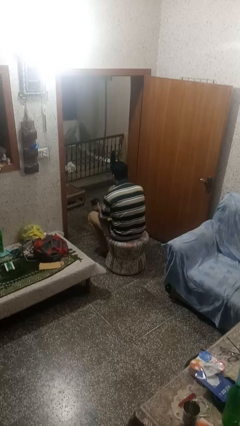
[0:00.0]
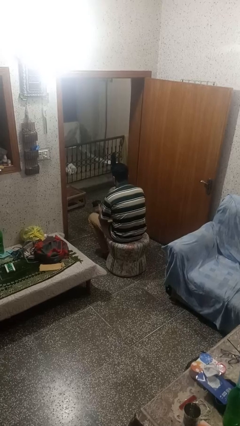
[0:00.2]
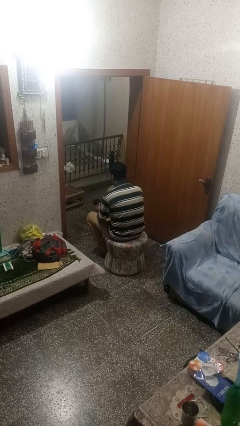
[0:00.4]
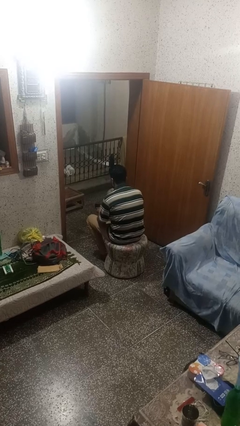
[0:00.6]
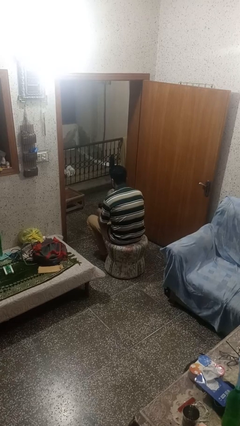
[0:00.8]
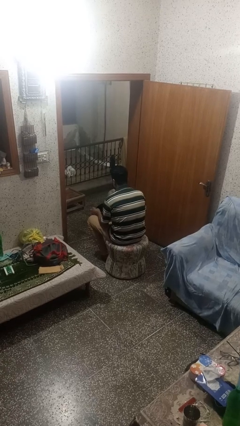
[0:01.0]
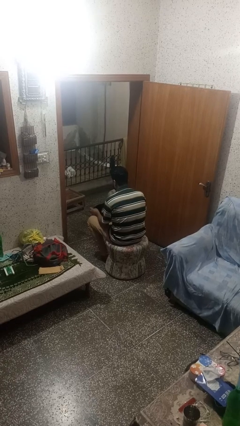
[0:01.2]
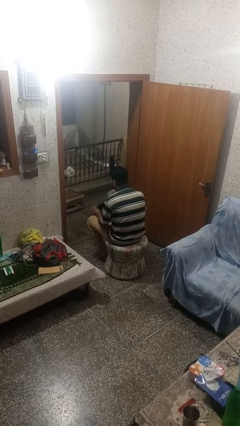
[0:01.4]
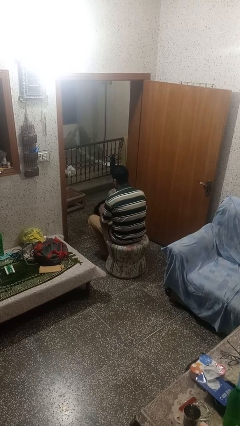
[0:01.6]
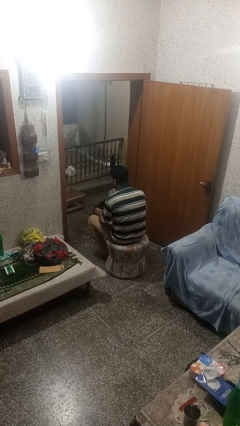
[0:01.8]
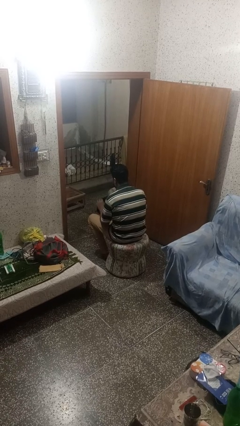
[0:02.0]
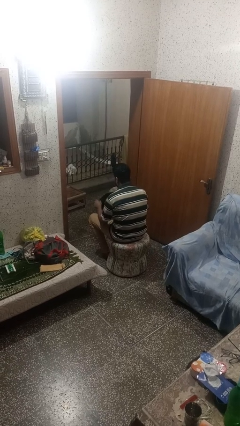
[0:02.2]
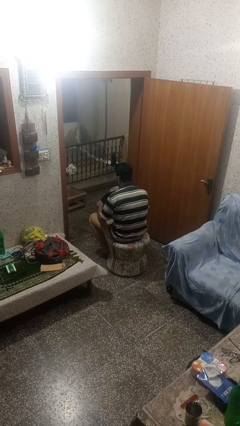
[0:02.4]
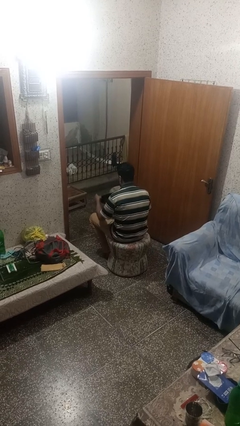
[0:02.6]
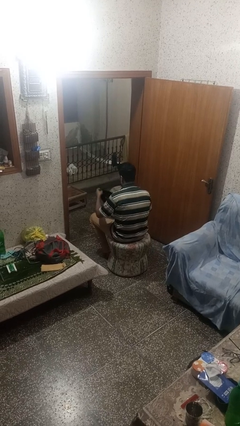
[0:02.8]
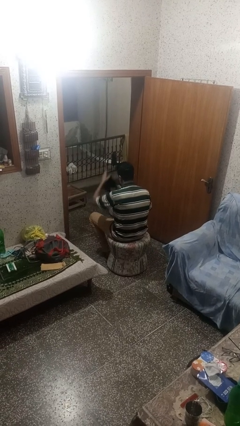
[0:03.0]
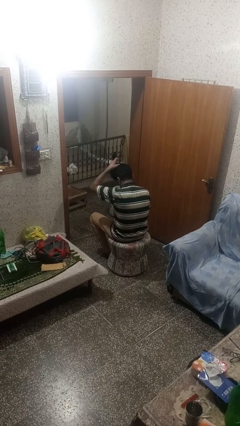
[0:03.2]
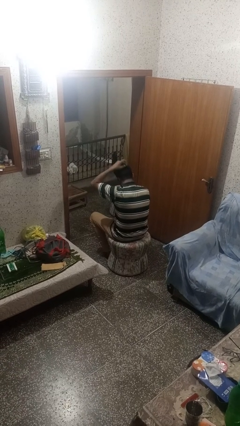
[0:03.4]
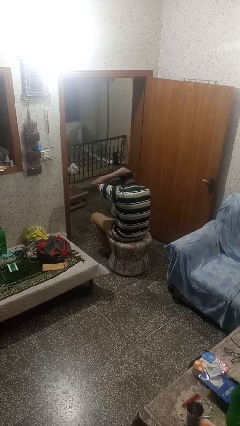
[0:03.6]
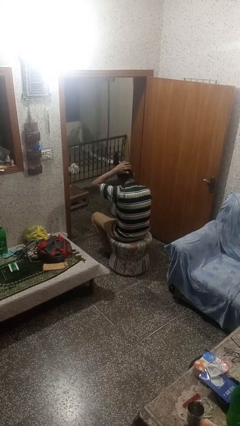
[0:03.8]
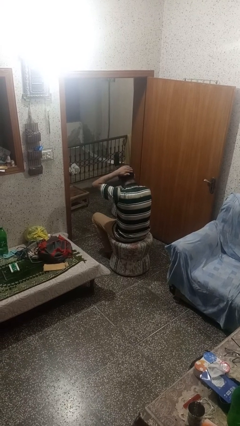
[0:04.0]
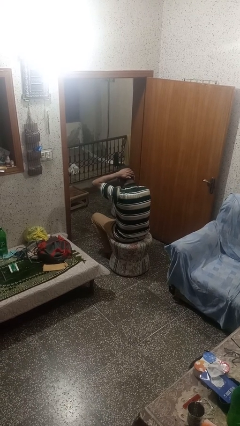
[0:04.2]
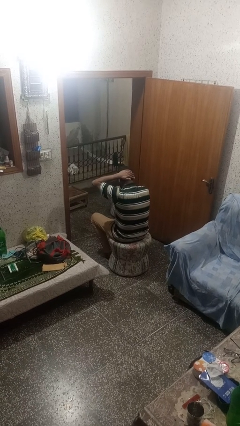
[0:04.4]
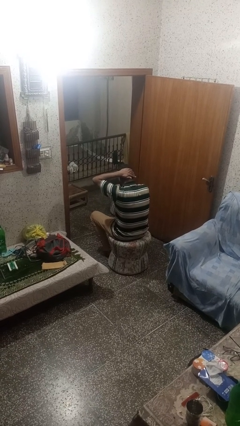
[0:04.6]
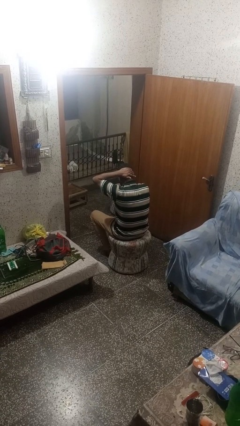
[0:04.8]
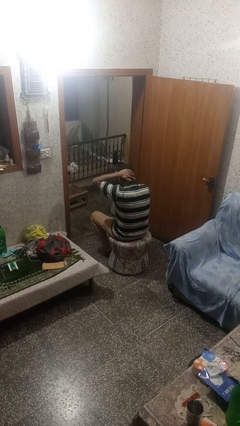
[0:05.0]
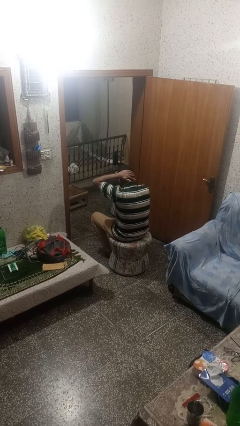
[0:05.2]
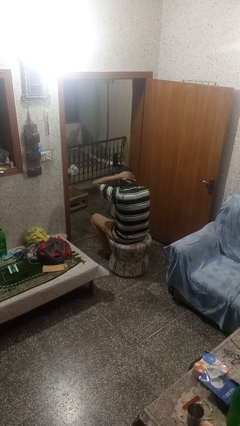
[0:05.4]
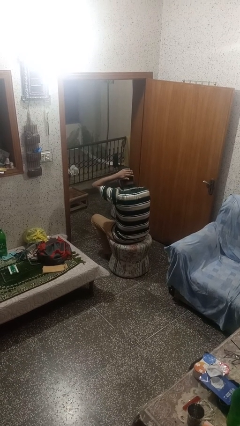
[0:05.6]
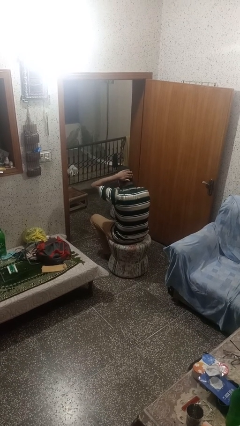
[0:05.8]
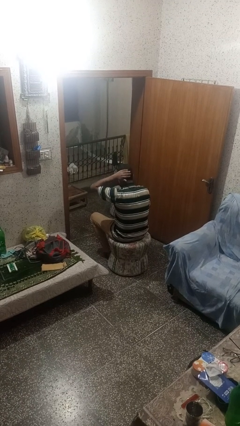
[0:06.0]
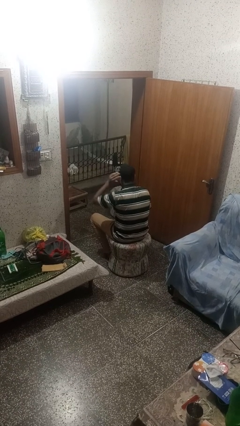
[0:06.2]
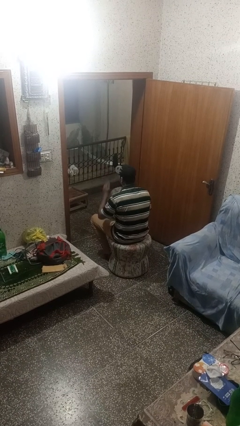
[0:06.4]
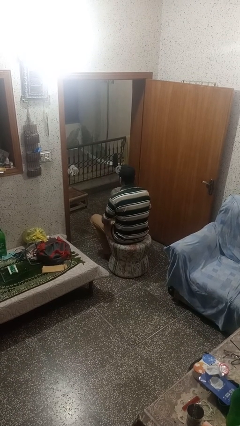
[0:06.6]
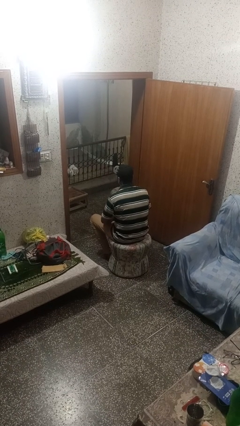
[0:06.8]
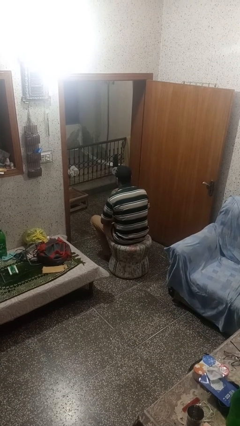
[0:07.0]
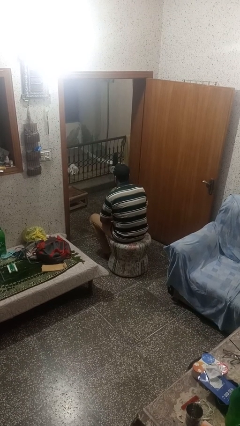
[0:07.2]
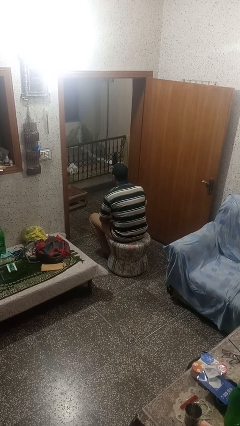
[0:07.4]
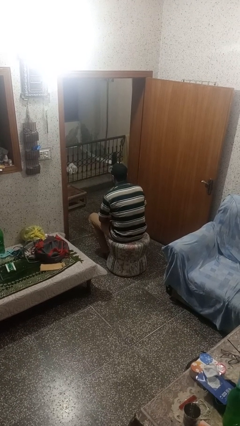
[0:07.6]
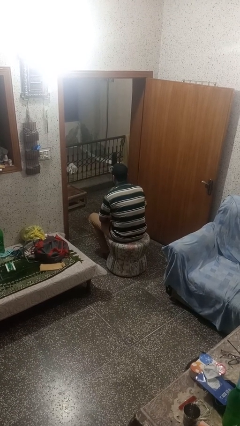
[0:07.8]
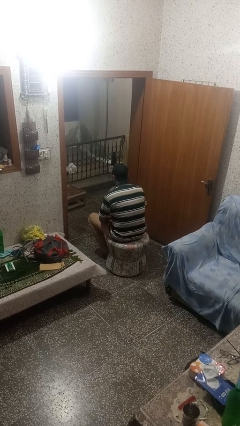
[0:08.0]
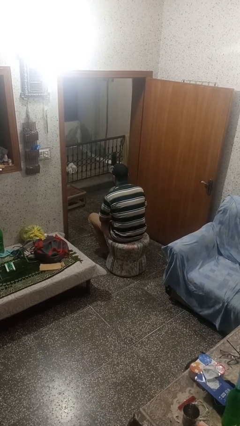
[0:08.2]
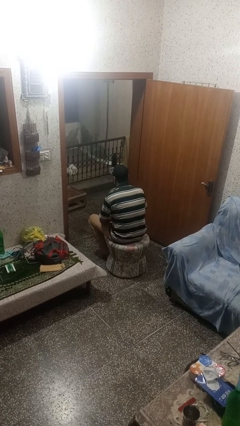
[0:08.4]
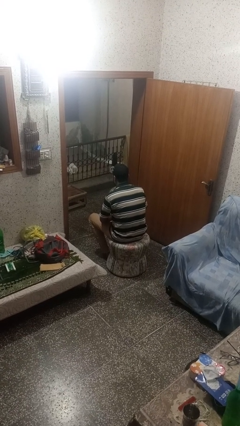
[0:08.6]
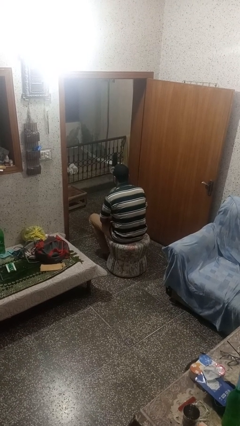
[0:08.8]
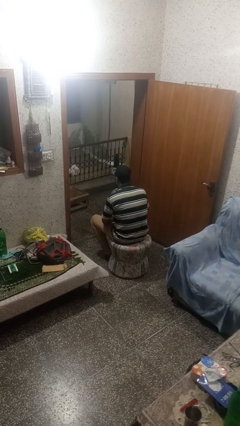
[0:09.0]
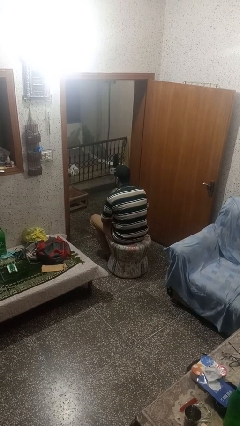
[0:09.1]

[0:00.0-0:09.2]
person puts on hat

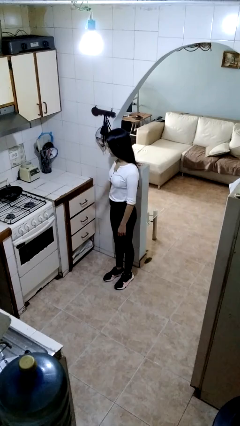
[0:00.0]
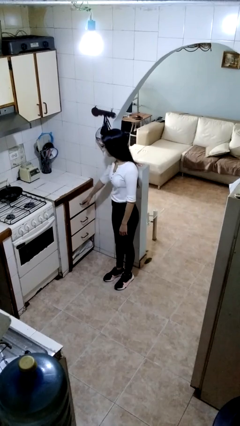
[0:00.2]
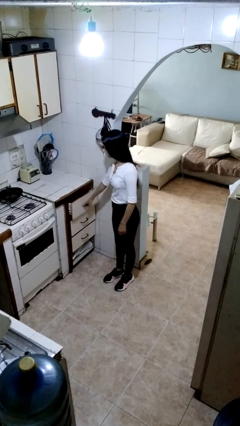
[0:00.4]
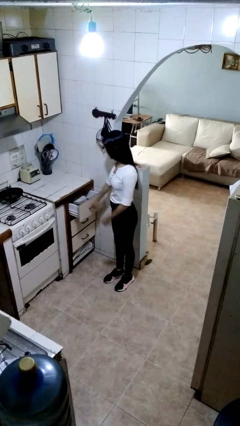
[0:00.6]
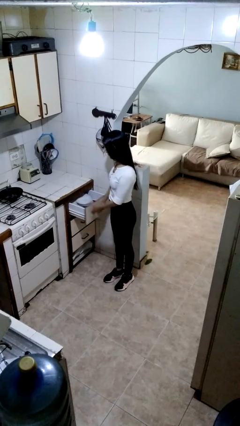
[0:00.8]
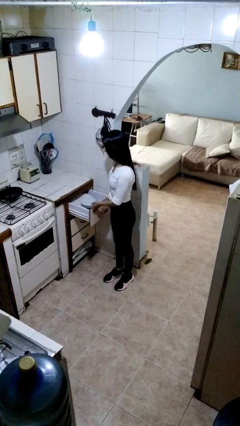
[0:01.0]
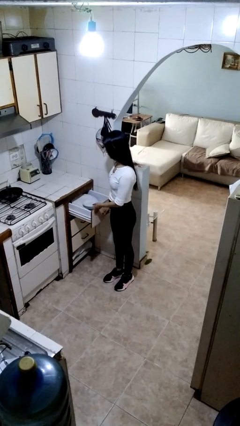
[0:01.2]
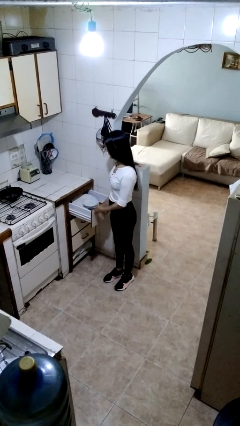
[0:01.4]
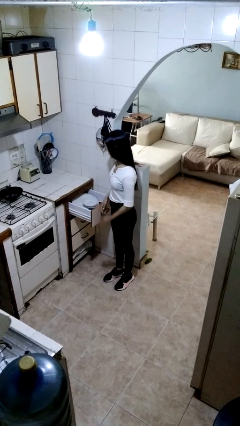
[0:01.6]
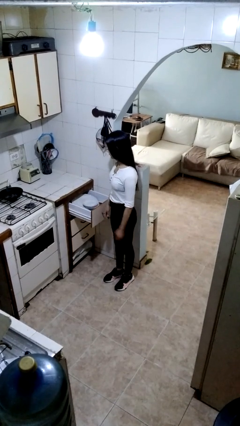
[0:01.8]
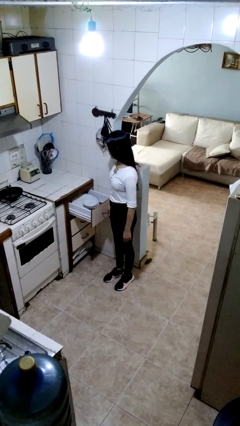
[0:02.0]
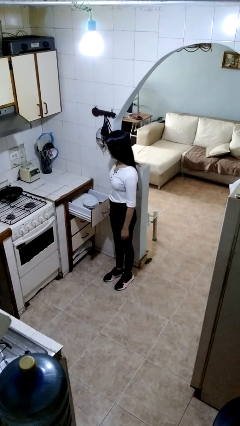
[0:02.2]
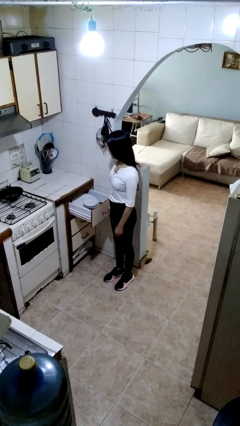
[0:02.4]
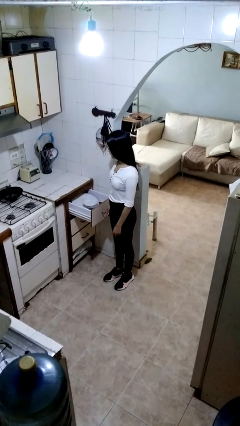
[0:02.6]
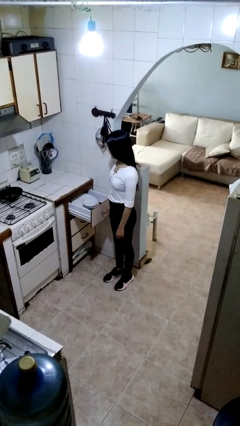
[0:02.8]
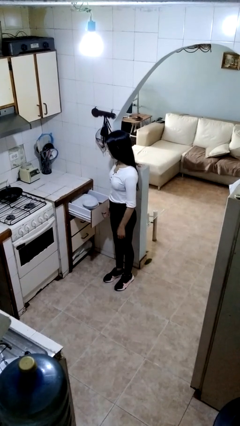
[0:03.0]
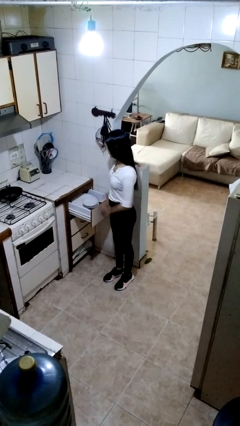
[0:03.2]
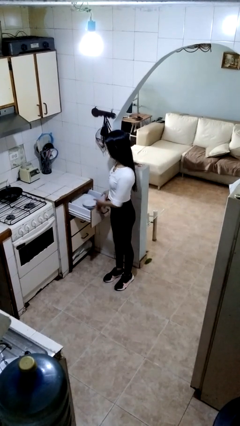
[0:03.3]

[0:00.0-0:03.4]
person opens kitchen drawer

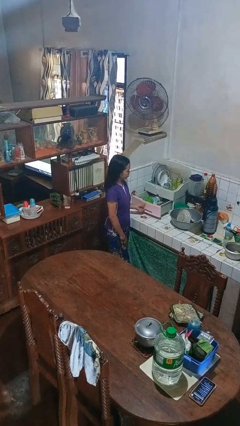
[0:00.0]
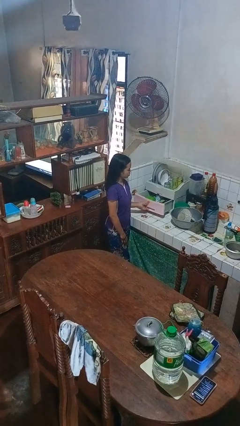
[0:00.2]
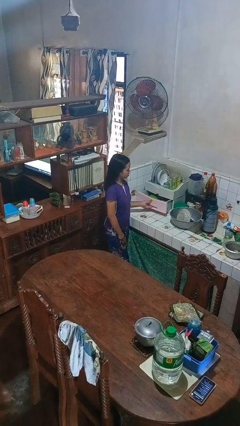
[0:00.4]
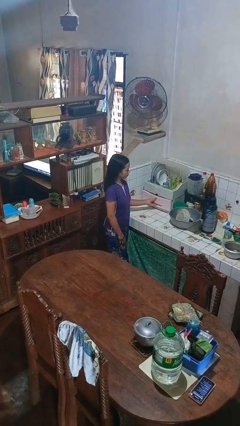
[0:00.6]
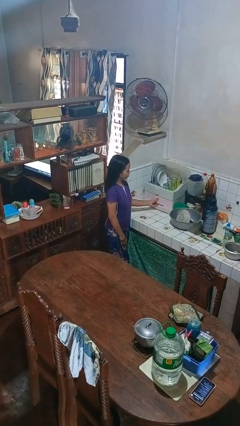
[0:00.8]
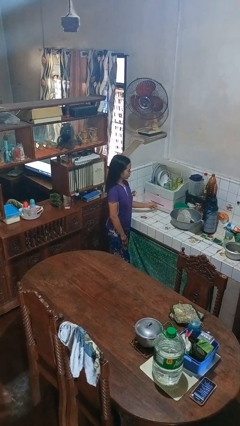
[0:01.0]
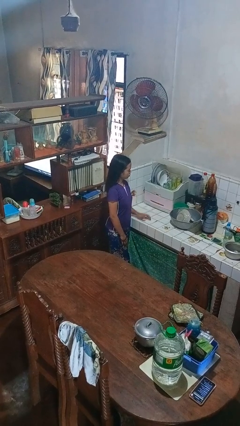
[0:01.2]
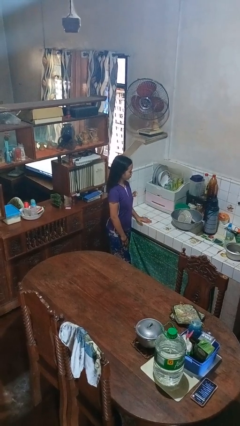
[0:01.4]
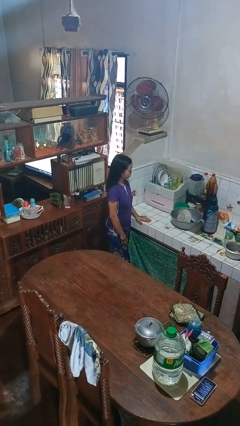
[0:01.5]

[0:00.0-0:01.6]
person closes kitchen drawer

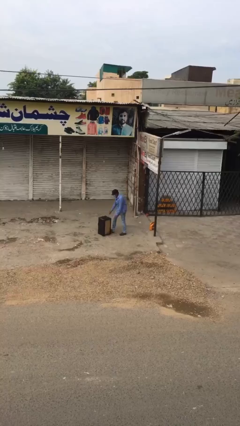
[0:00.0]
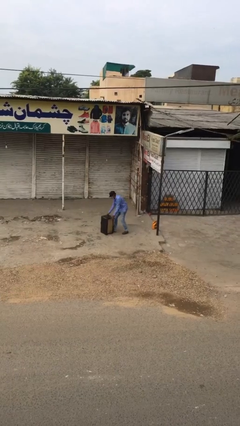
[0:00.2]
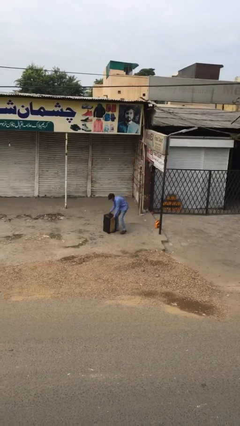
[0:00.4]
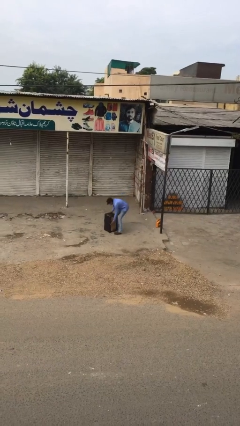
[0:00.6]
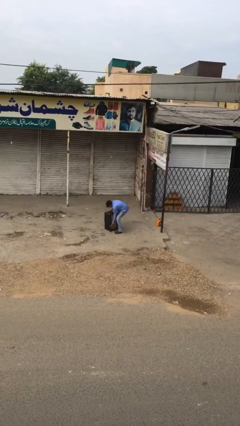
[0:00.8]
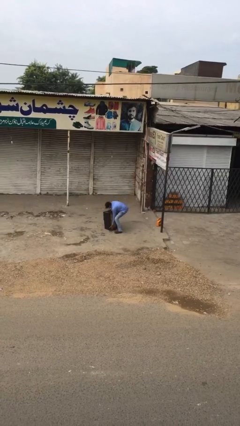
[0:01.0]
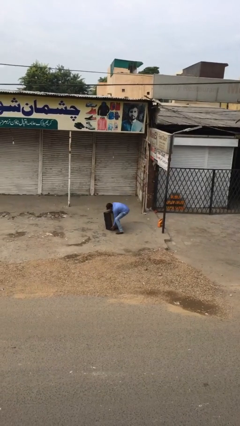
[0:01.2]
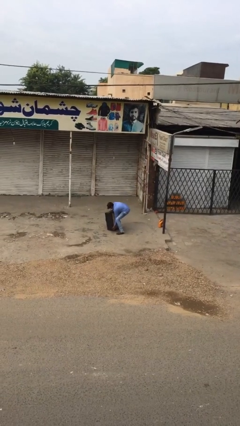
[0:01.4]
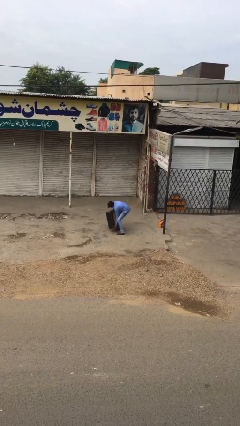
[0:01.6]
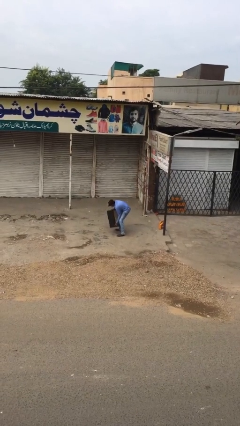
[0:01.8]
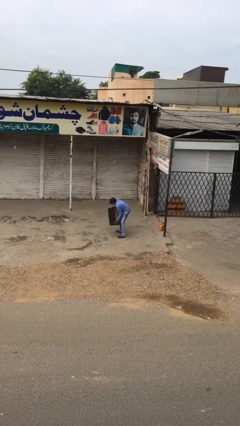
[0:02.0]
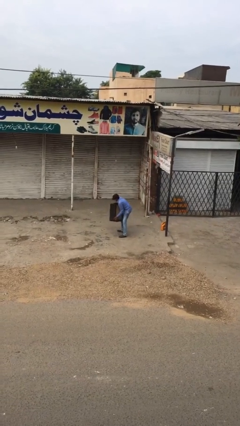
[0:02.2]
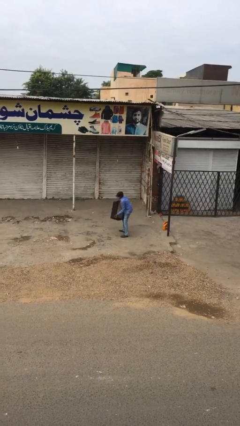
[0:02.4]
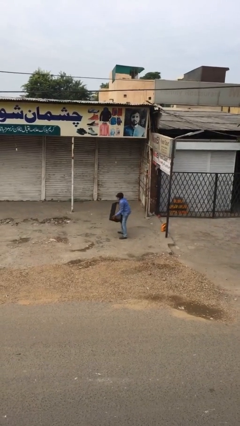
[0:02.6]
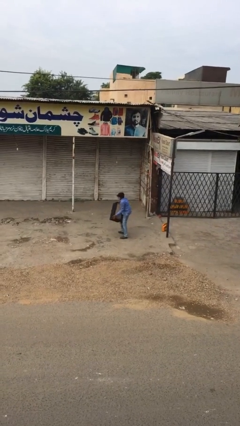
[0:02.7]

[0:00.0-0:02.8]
person picks up object from floor

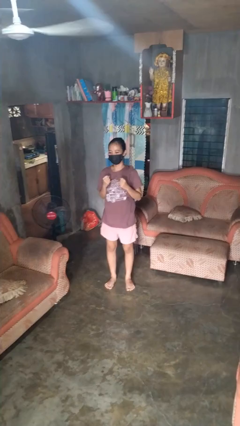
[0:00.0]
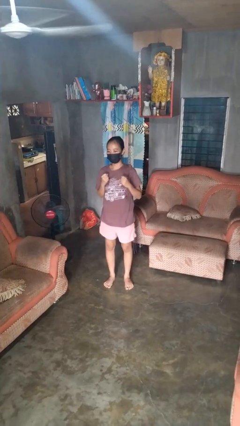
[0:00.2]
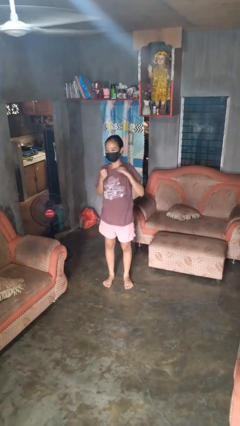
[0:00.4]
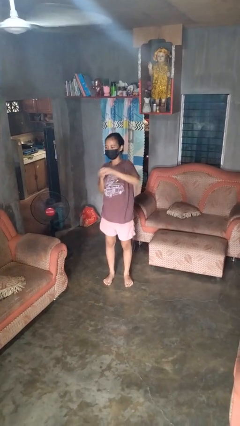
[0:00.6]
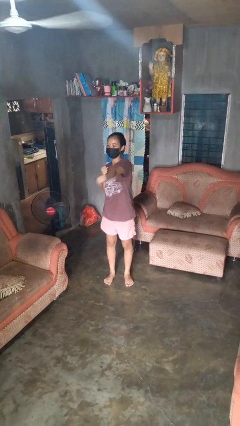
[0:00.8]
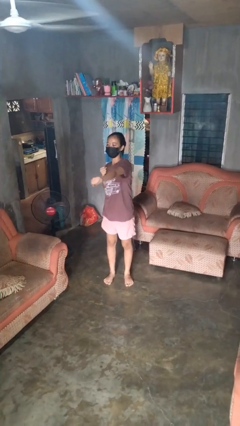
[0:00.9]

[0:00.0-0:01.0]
person punches
